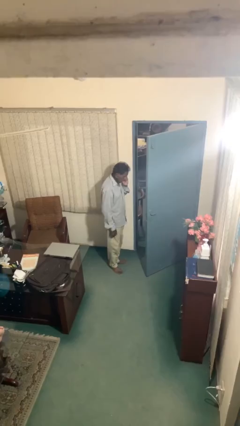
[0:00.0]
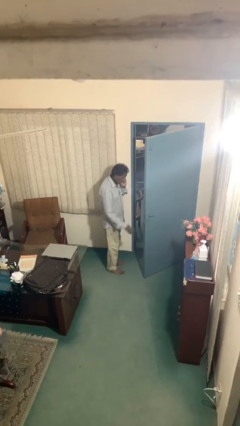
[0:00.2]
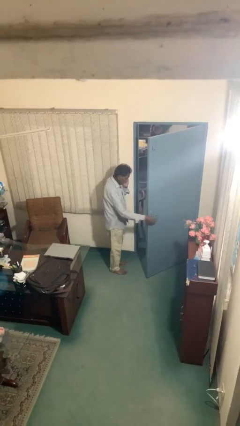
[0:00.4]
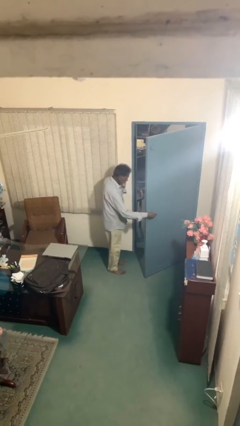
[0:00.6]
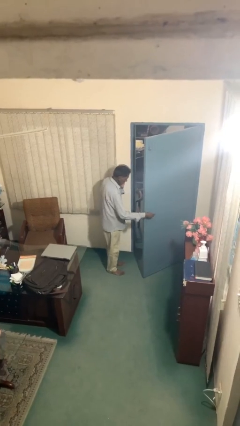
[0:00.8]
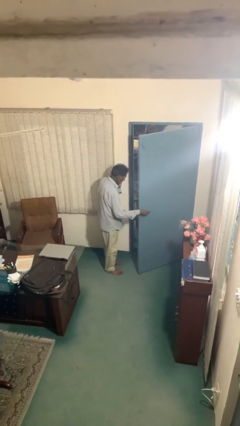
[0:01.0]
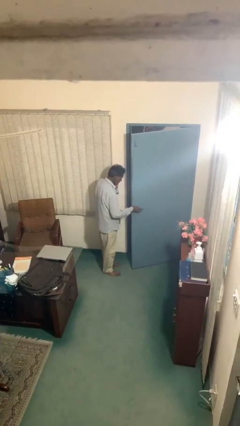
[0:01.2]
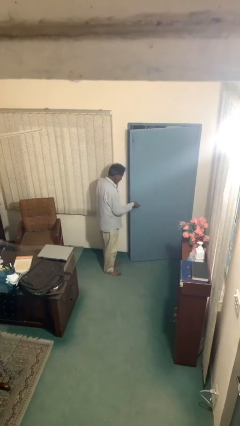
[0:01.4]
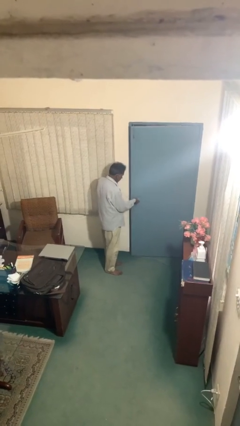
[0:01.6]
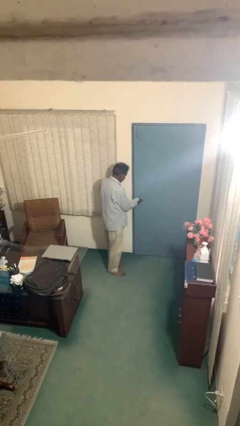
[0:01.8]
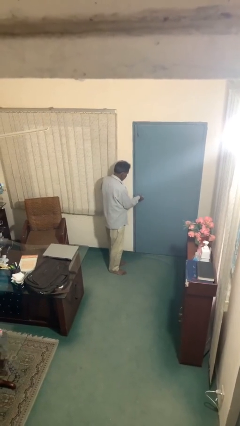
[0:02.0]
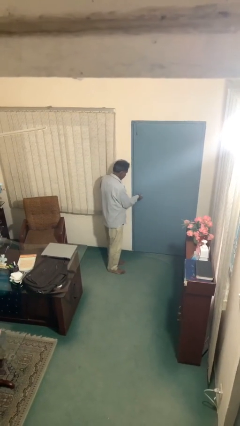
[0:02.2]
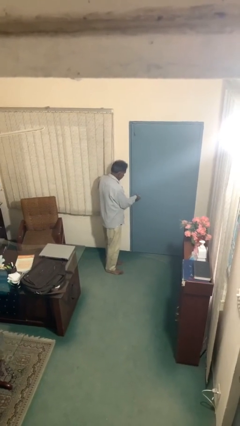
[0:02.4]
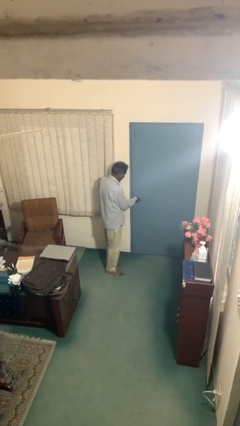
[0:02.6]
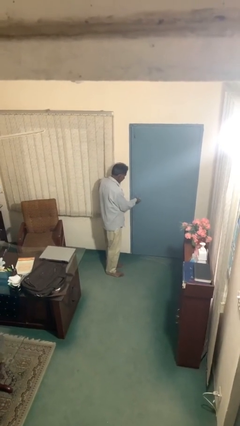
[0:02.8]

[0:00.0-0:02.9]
person closes facility door

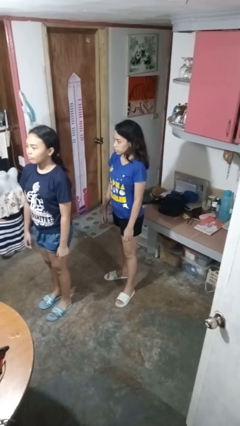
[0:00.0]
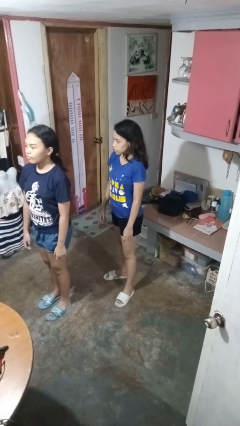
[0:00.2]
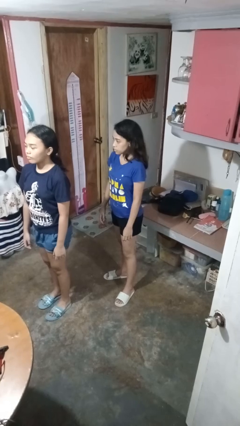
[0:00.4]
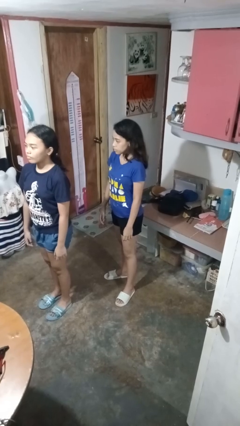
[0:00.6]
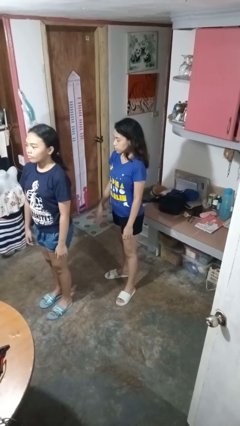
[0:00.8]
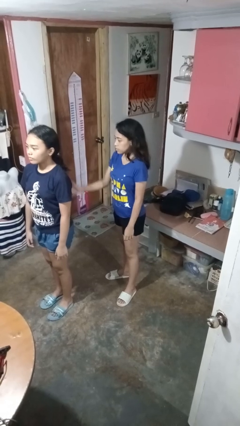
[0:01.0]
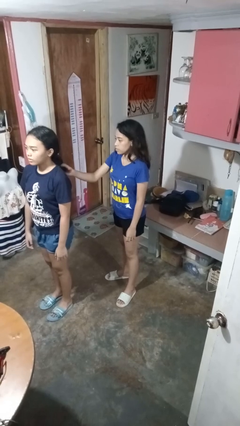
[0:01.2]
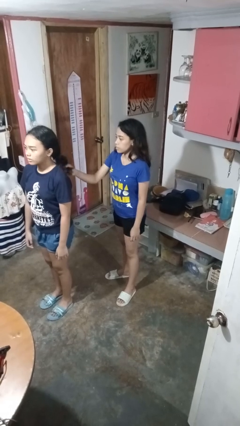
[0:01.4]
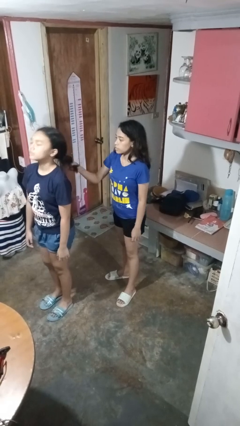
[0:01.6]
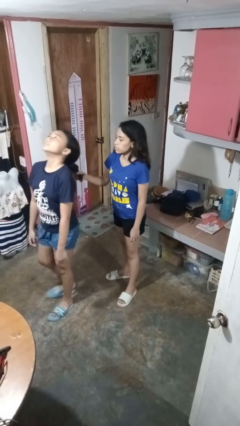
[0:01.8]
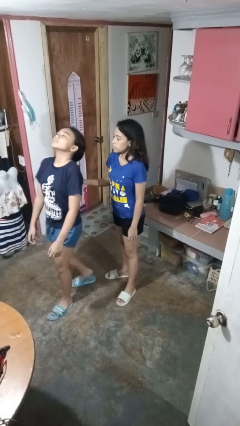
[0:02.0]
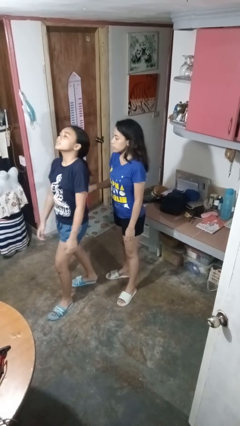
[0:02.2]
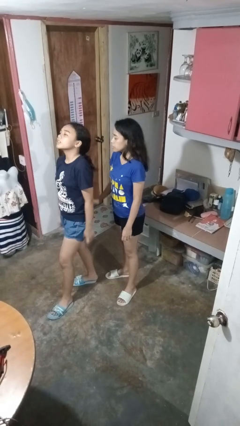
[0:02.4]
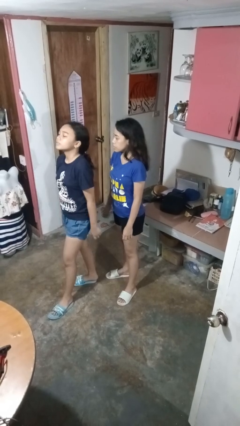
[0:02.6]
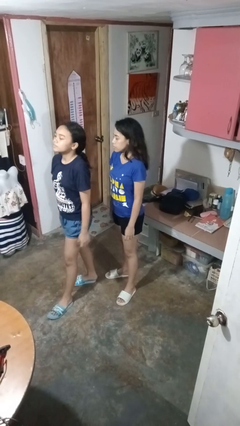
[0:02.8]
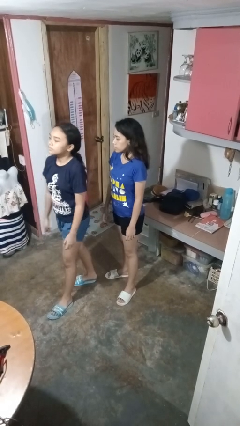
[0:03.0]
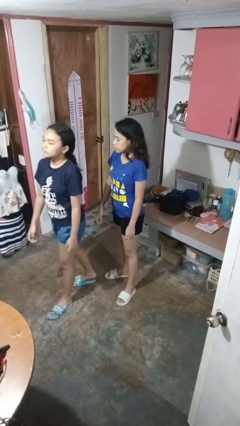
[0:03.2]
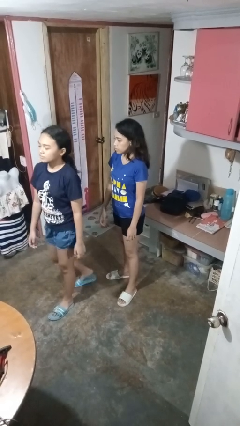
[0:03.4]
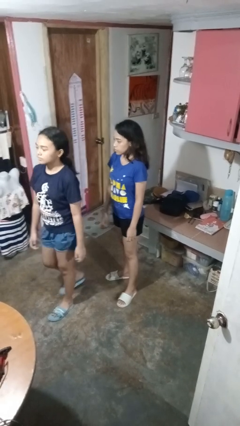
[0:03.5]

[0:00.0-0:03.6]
person grabs person by hair

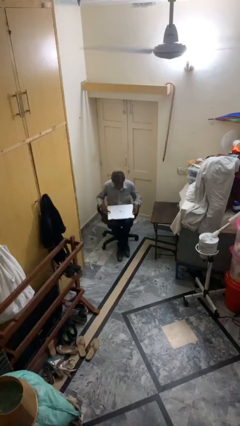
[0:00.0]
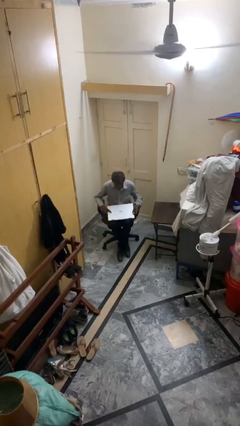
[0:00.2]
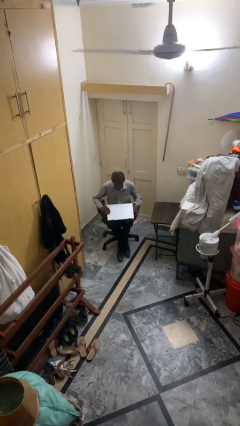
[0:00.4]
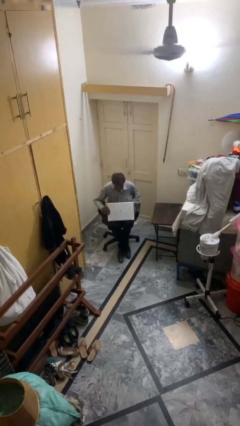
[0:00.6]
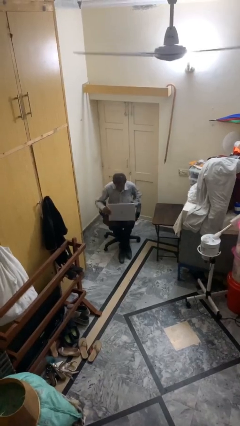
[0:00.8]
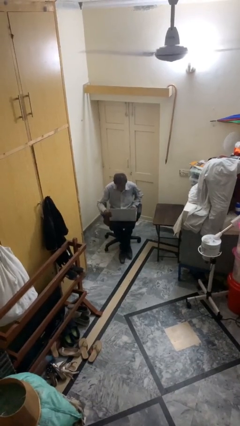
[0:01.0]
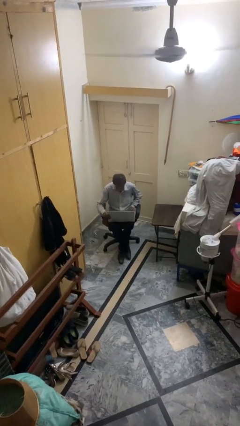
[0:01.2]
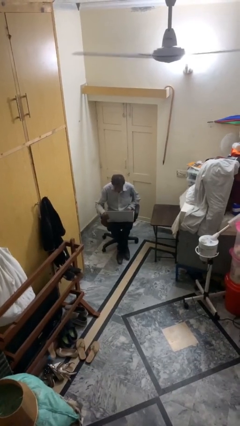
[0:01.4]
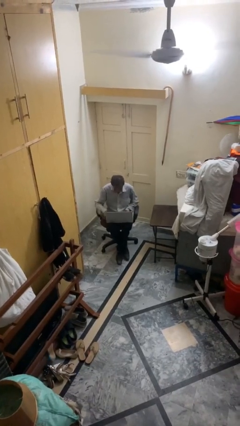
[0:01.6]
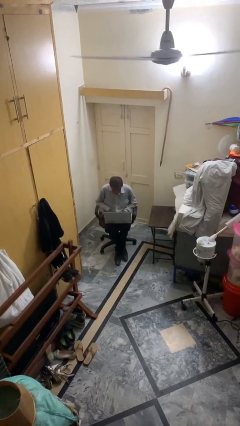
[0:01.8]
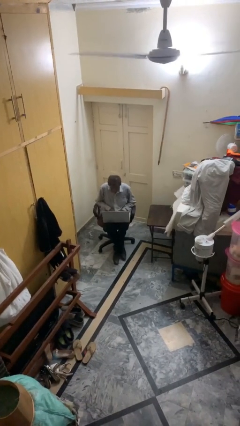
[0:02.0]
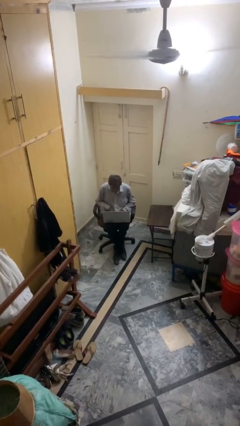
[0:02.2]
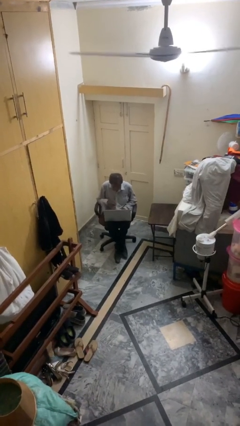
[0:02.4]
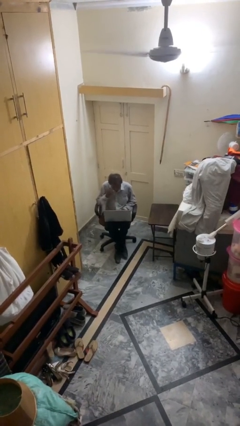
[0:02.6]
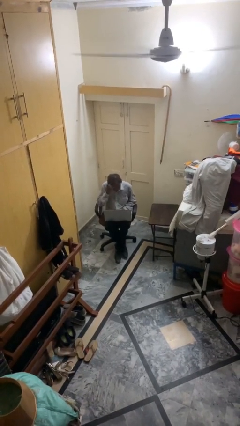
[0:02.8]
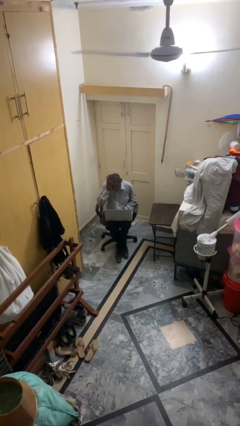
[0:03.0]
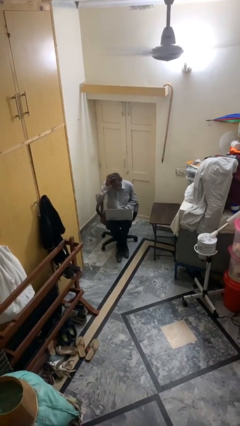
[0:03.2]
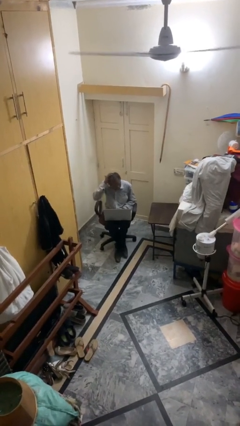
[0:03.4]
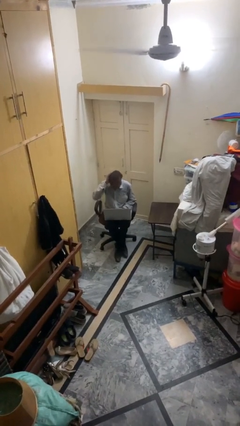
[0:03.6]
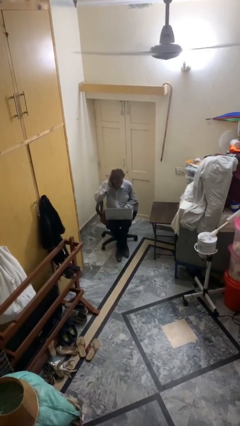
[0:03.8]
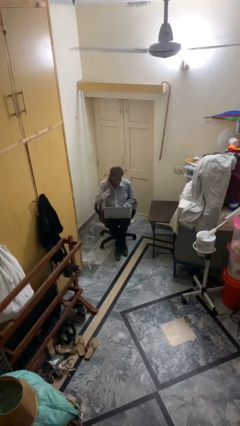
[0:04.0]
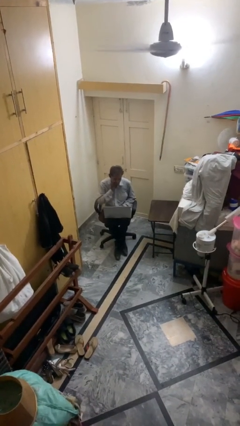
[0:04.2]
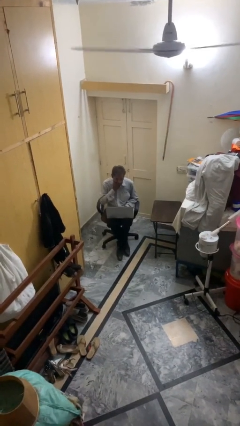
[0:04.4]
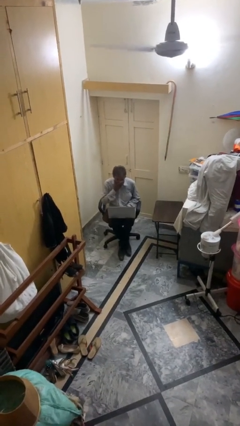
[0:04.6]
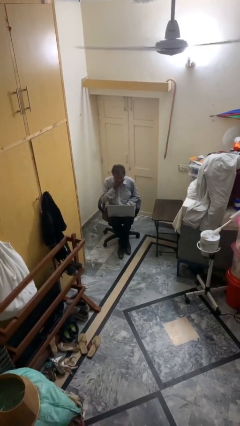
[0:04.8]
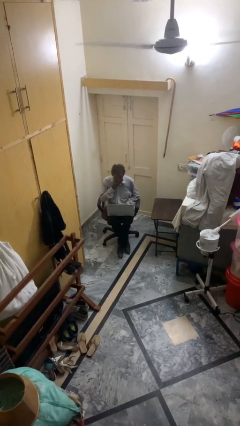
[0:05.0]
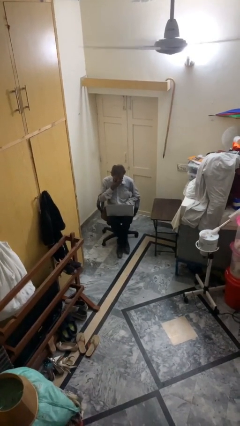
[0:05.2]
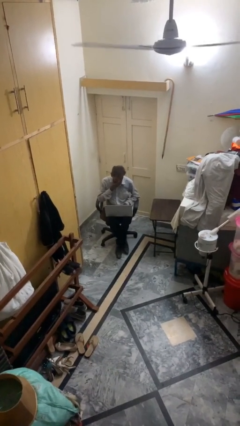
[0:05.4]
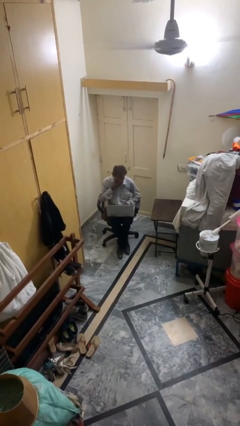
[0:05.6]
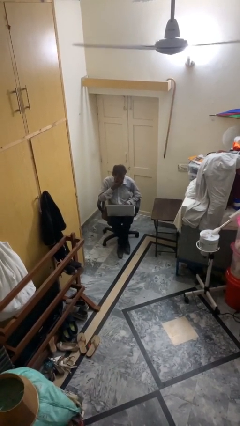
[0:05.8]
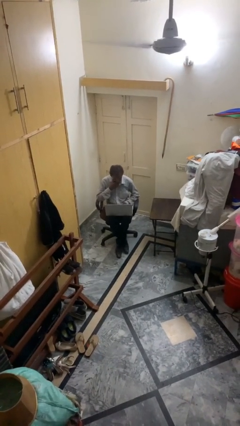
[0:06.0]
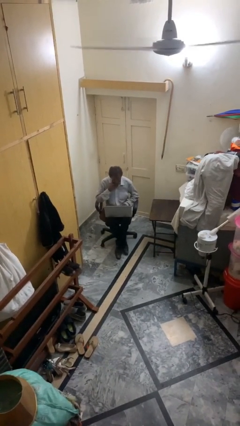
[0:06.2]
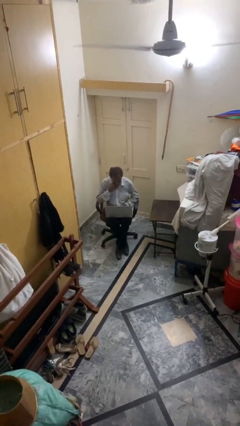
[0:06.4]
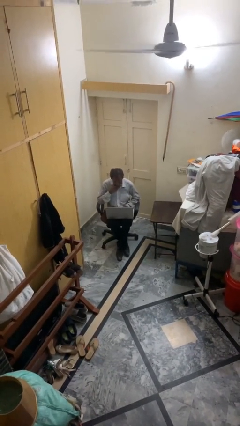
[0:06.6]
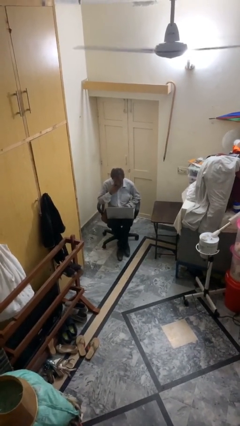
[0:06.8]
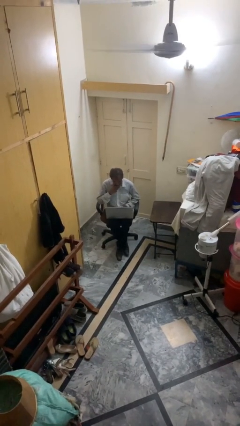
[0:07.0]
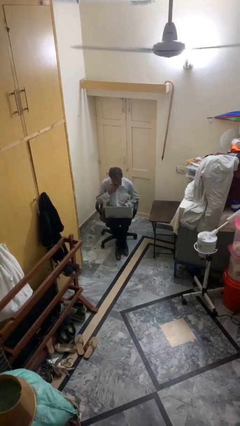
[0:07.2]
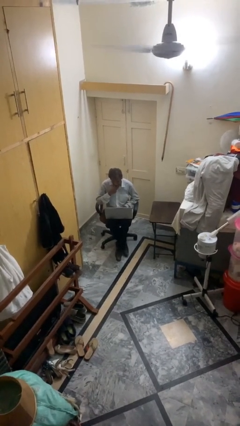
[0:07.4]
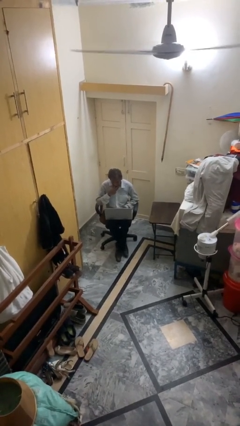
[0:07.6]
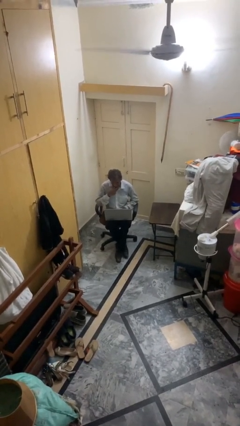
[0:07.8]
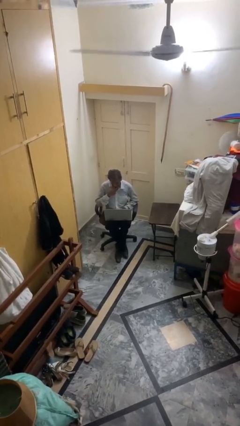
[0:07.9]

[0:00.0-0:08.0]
person interacts with laptop

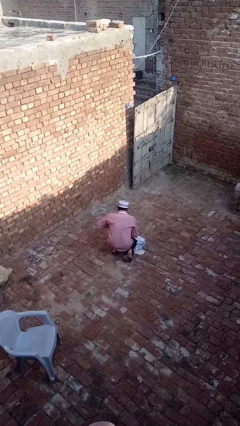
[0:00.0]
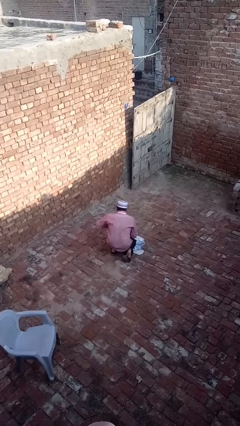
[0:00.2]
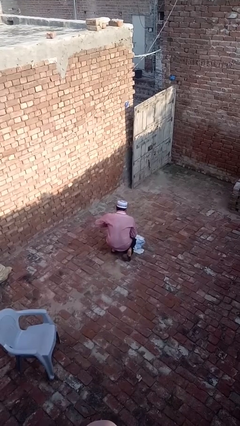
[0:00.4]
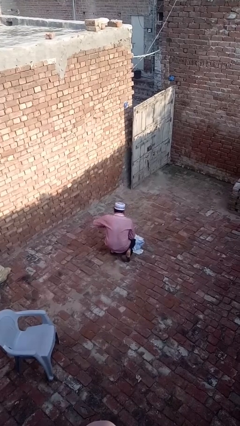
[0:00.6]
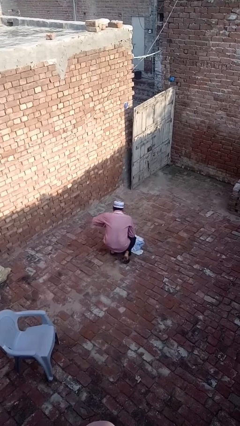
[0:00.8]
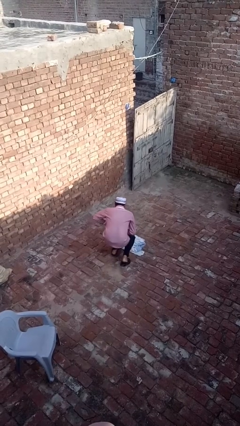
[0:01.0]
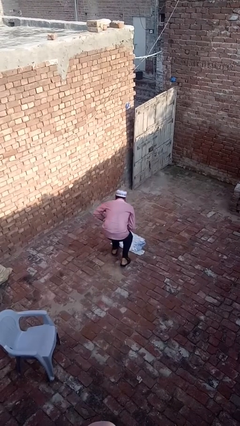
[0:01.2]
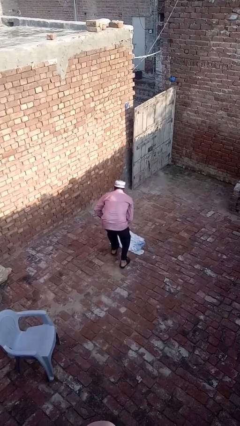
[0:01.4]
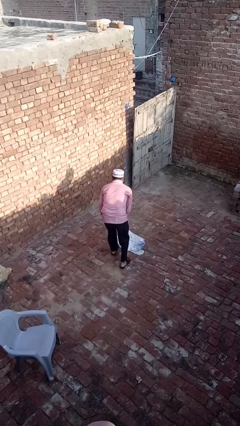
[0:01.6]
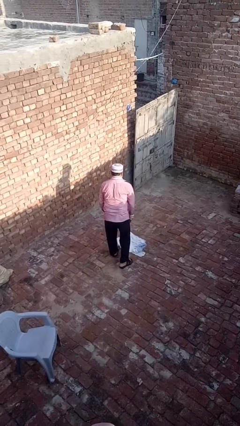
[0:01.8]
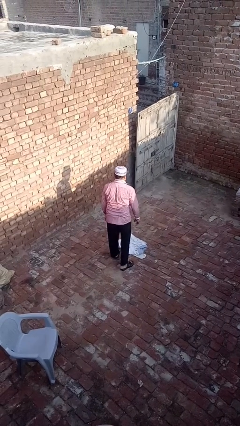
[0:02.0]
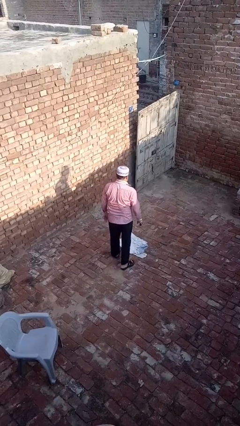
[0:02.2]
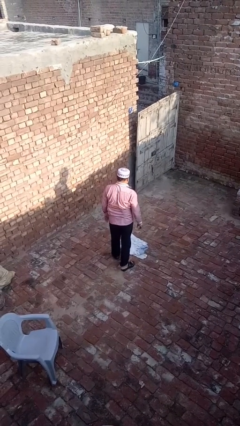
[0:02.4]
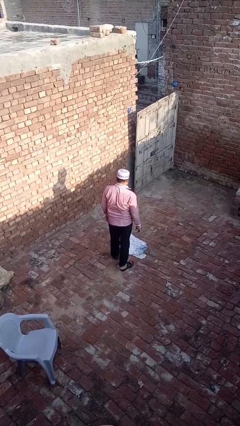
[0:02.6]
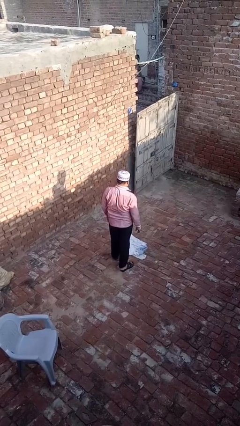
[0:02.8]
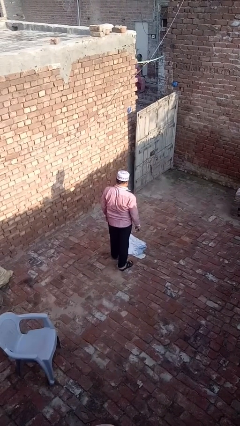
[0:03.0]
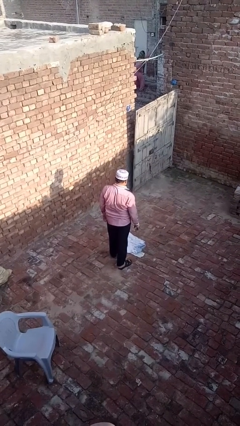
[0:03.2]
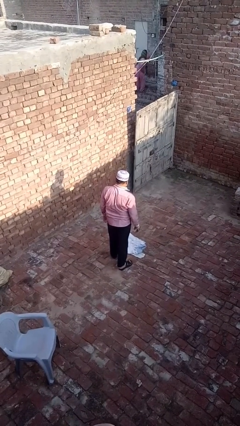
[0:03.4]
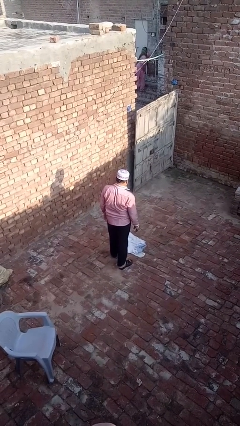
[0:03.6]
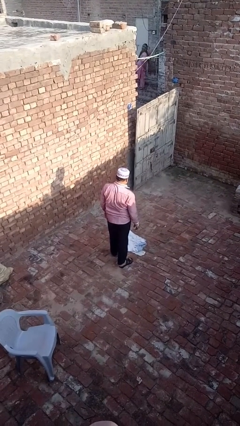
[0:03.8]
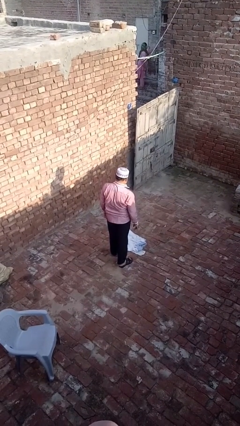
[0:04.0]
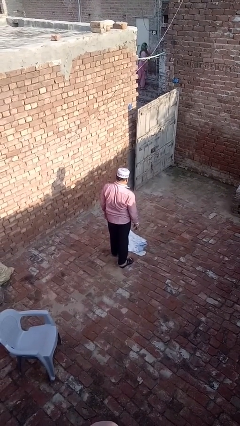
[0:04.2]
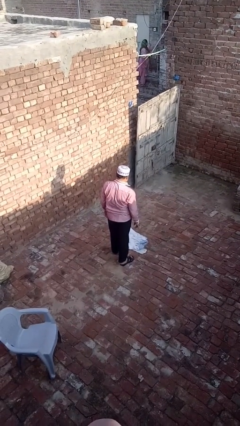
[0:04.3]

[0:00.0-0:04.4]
person stands up from floor
